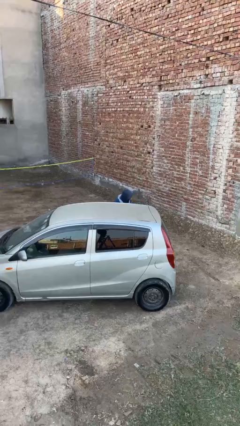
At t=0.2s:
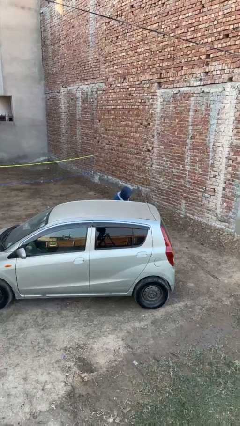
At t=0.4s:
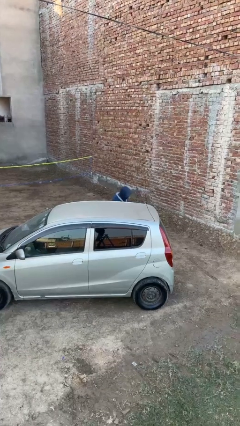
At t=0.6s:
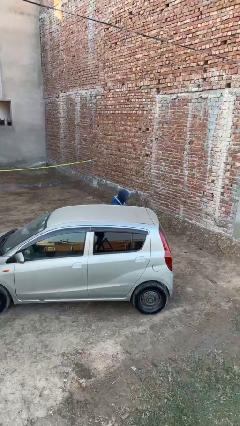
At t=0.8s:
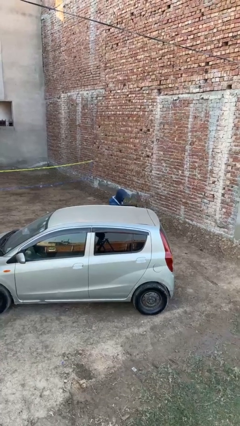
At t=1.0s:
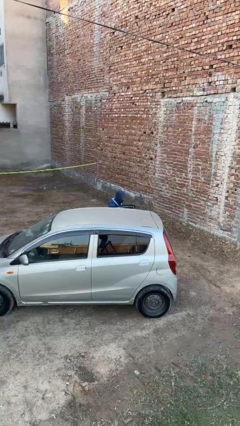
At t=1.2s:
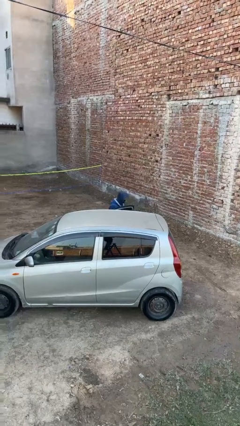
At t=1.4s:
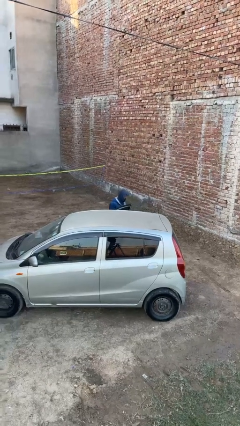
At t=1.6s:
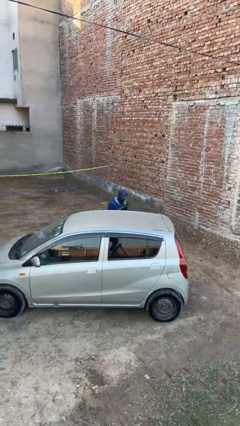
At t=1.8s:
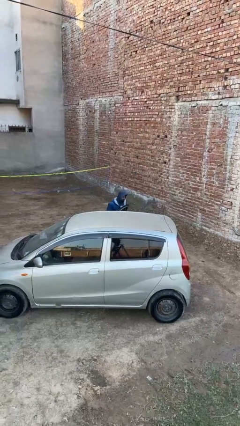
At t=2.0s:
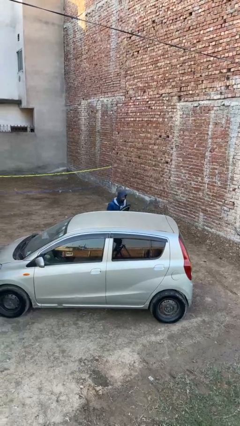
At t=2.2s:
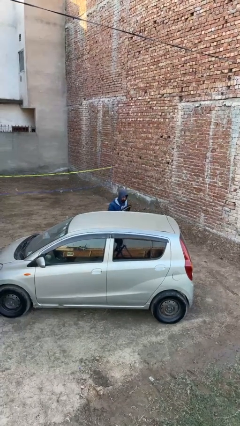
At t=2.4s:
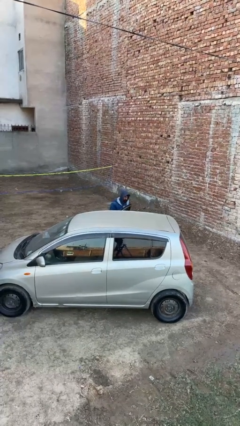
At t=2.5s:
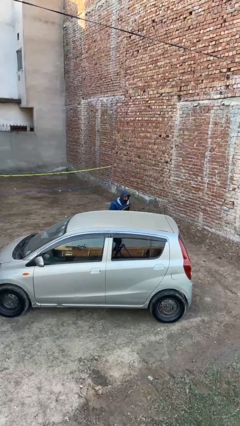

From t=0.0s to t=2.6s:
person opens car door

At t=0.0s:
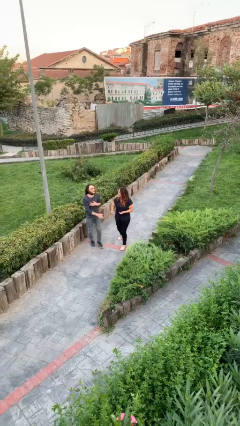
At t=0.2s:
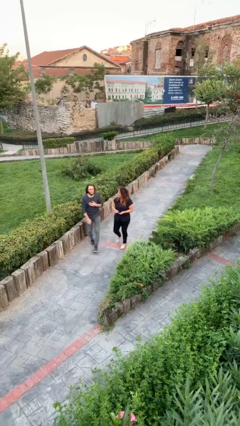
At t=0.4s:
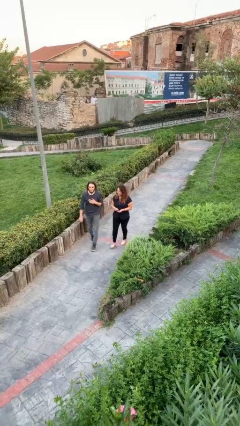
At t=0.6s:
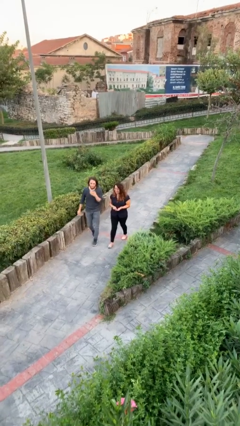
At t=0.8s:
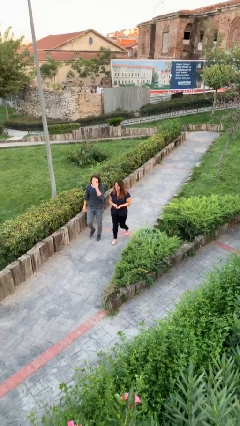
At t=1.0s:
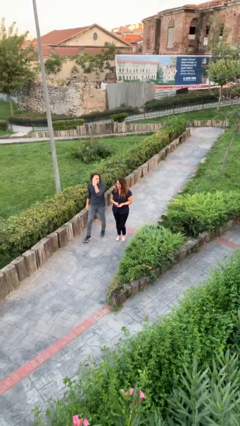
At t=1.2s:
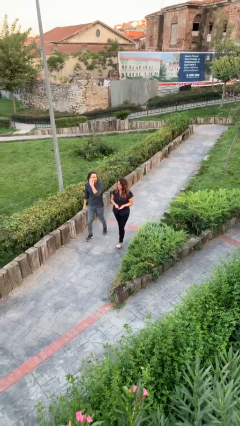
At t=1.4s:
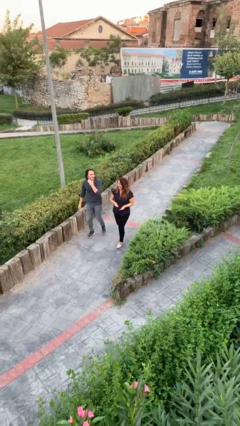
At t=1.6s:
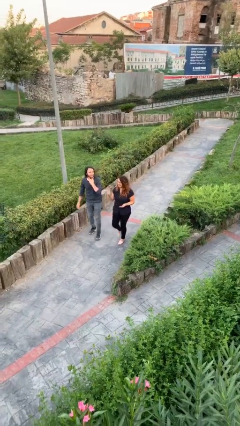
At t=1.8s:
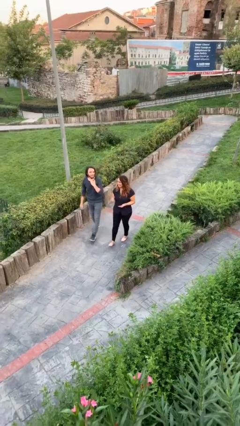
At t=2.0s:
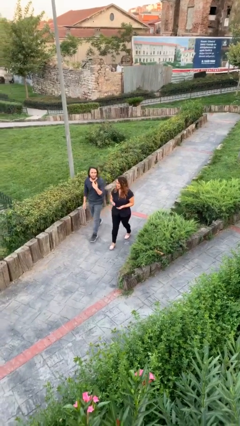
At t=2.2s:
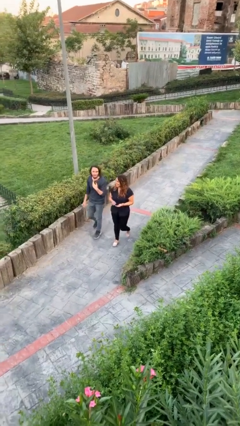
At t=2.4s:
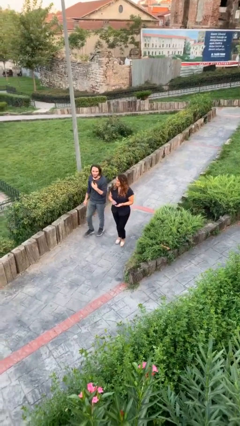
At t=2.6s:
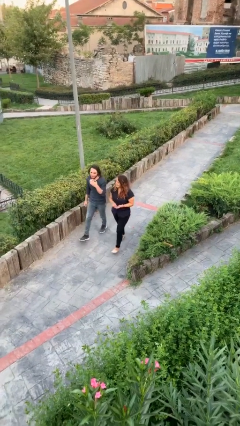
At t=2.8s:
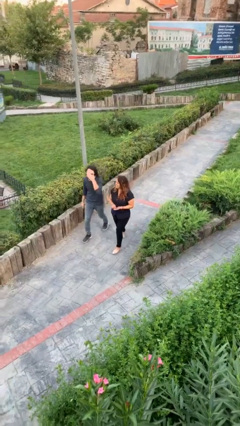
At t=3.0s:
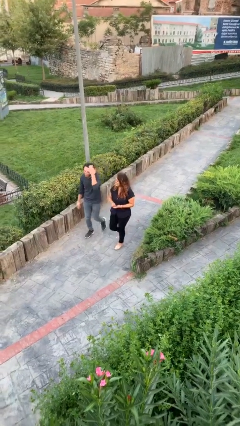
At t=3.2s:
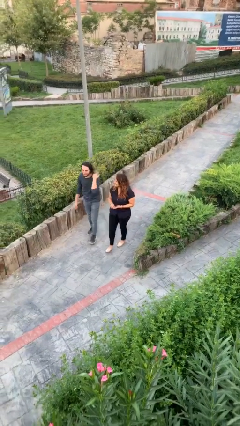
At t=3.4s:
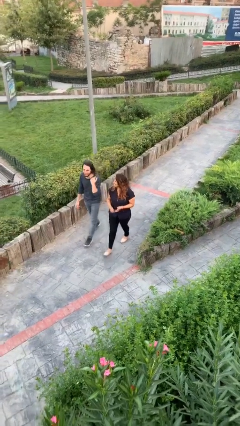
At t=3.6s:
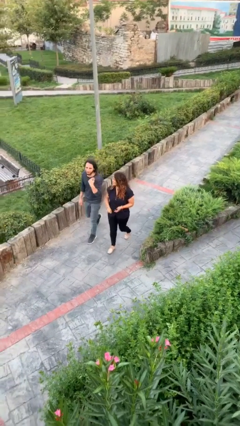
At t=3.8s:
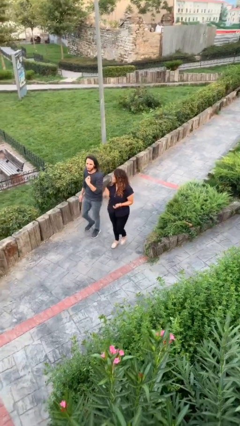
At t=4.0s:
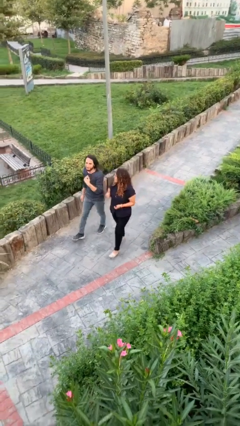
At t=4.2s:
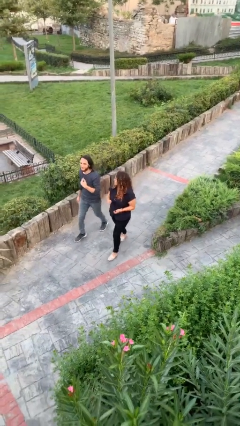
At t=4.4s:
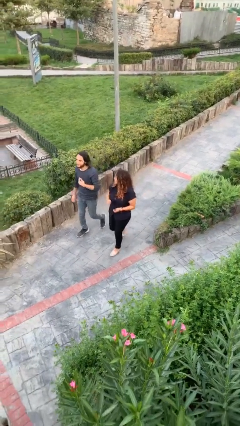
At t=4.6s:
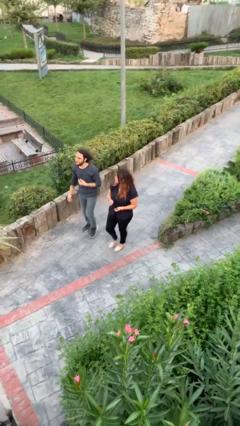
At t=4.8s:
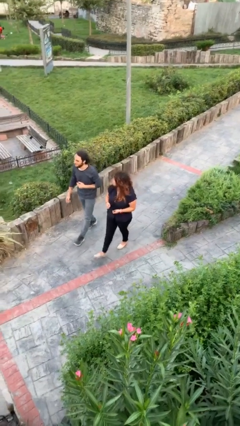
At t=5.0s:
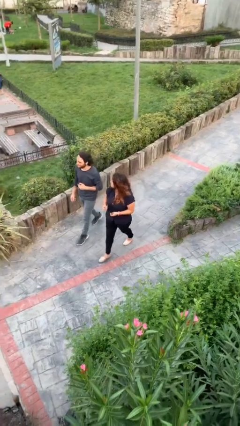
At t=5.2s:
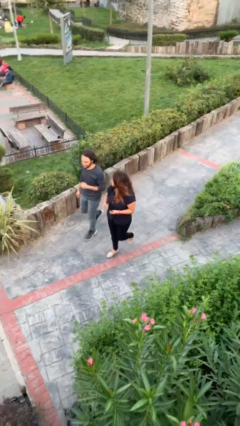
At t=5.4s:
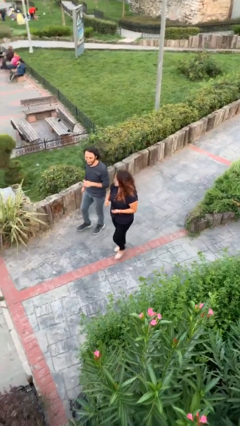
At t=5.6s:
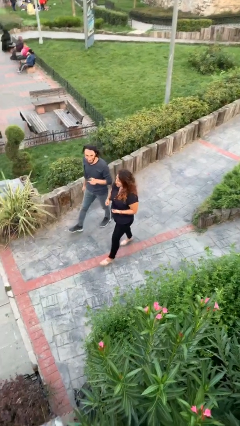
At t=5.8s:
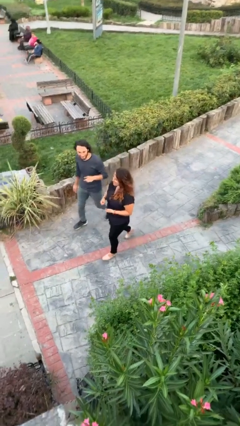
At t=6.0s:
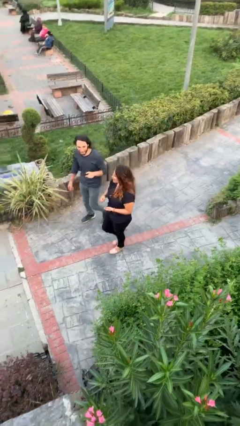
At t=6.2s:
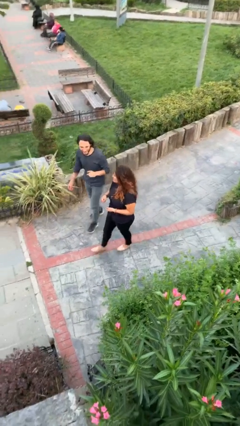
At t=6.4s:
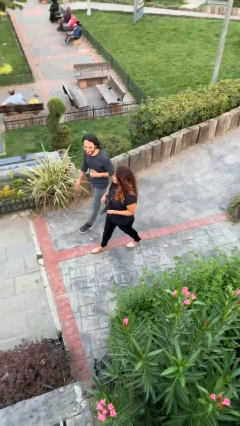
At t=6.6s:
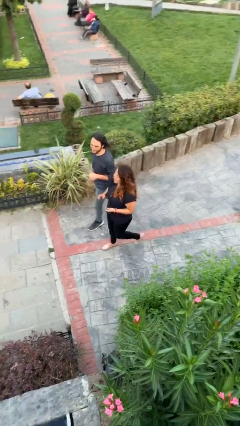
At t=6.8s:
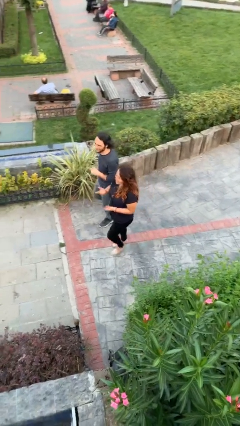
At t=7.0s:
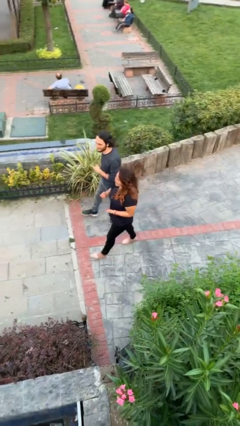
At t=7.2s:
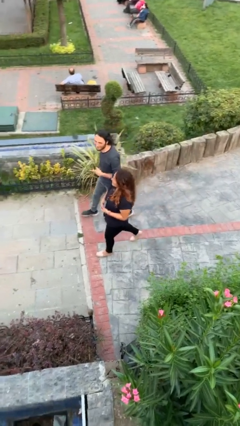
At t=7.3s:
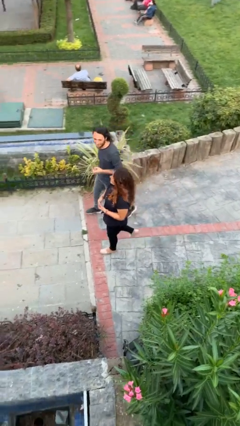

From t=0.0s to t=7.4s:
person talks to person

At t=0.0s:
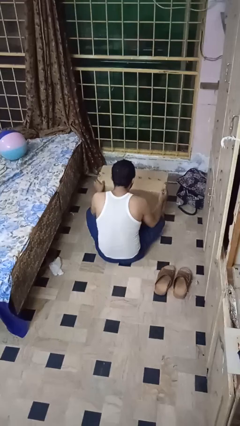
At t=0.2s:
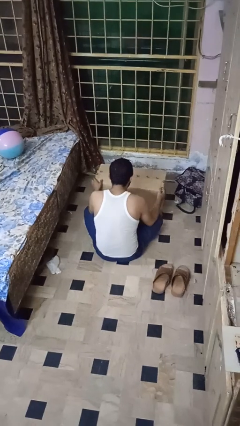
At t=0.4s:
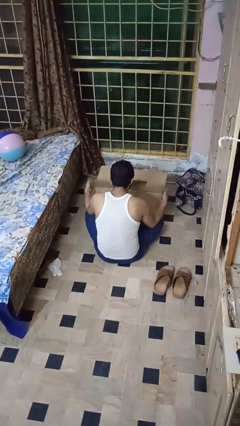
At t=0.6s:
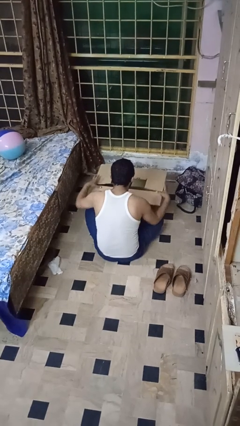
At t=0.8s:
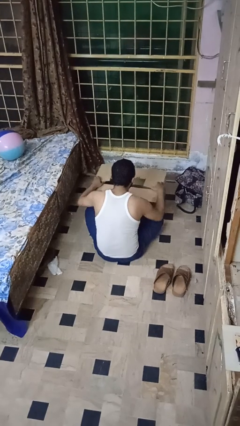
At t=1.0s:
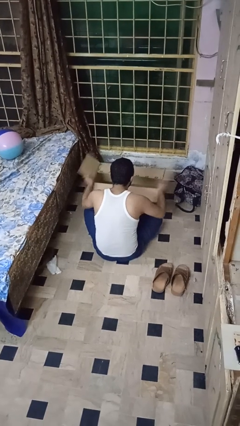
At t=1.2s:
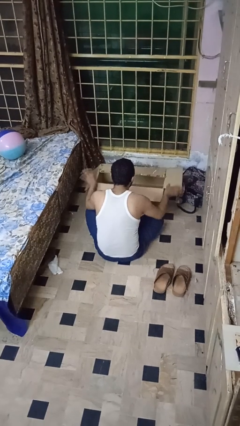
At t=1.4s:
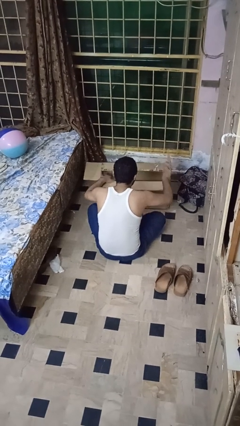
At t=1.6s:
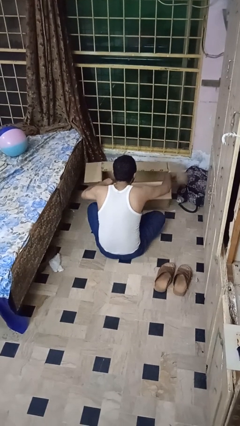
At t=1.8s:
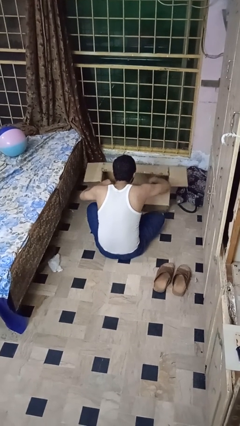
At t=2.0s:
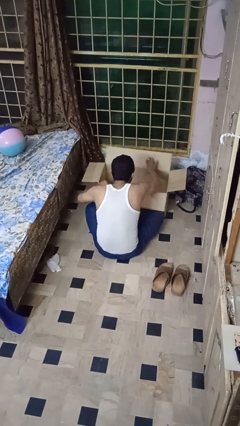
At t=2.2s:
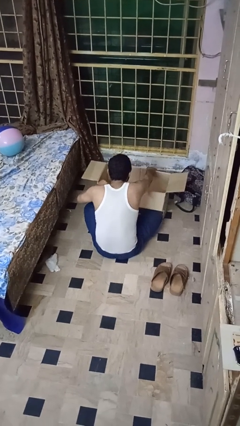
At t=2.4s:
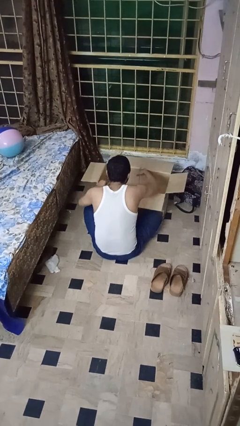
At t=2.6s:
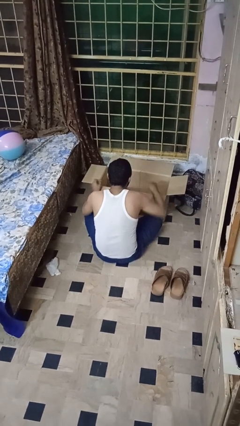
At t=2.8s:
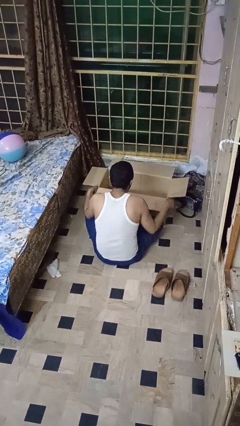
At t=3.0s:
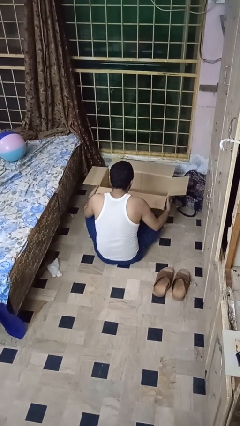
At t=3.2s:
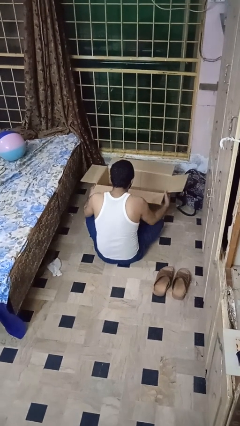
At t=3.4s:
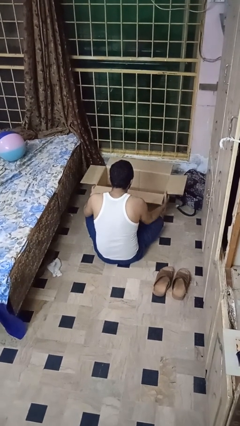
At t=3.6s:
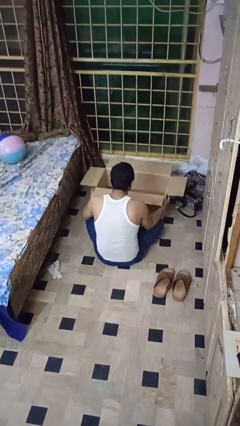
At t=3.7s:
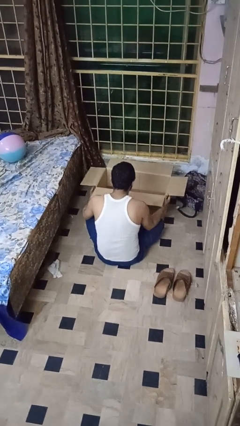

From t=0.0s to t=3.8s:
person opens box

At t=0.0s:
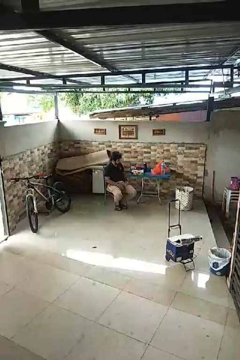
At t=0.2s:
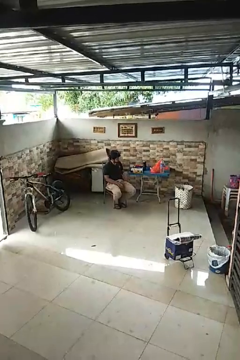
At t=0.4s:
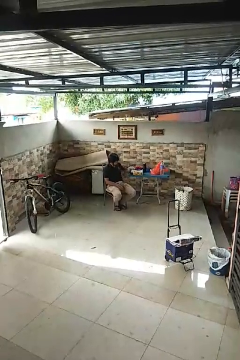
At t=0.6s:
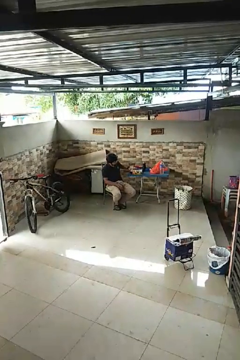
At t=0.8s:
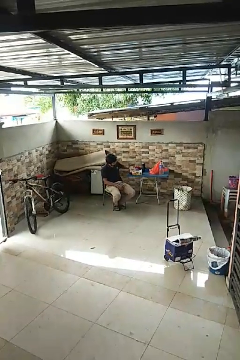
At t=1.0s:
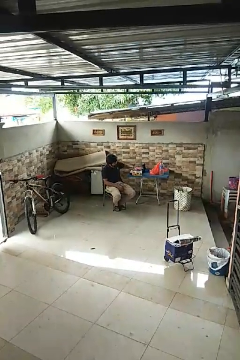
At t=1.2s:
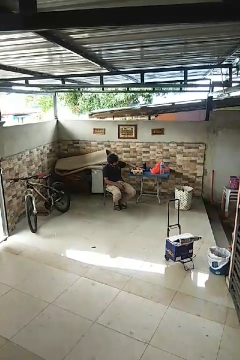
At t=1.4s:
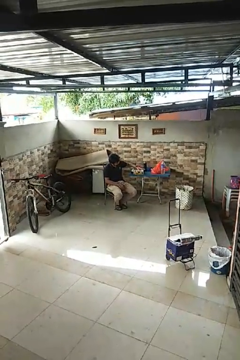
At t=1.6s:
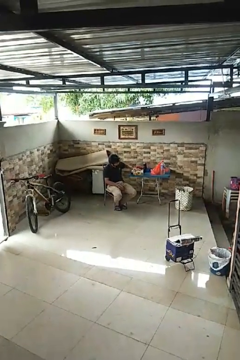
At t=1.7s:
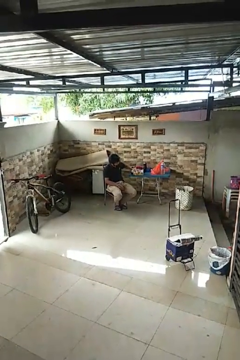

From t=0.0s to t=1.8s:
person taps object with finger

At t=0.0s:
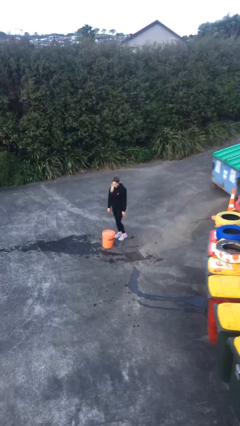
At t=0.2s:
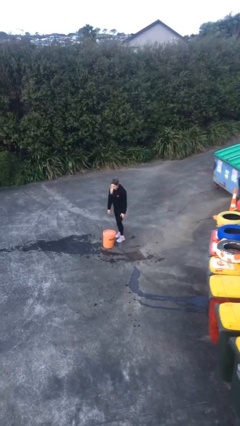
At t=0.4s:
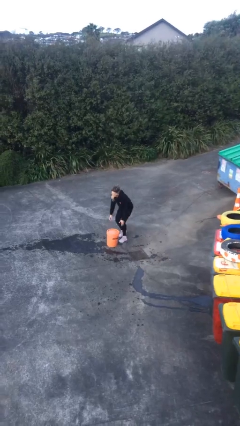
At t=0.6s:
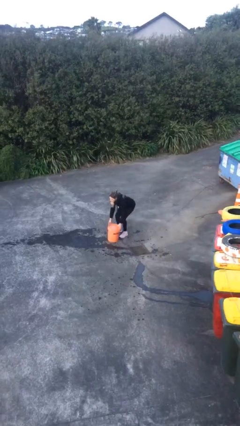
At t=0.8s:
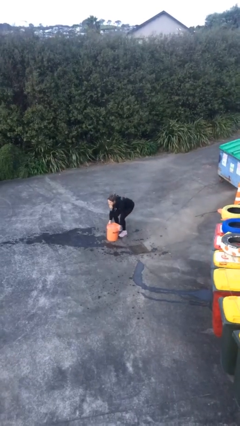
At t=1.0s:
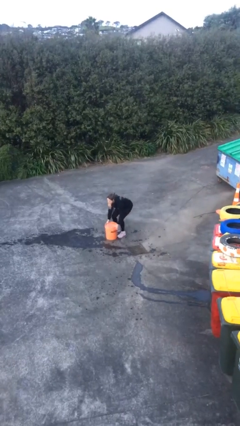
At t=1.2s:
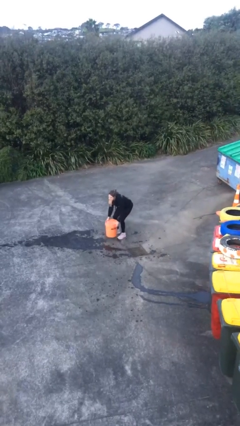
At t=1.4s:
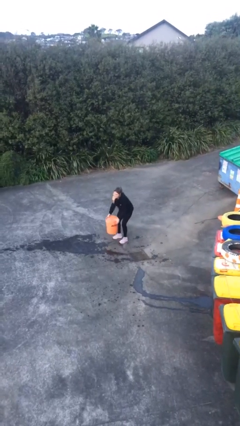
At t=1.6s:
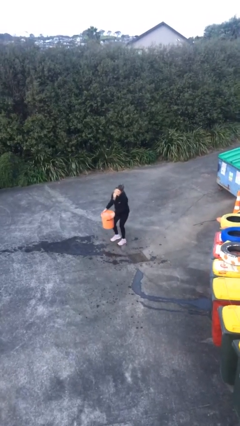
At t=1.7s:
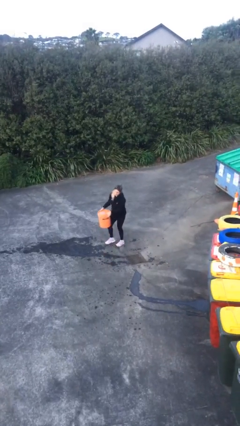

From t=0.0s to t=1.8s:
person picks up object from floor

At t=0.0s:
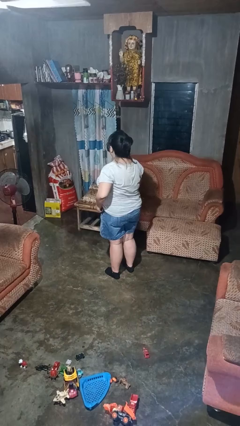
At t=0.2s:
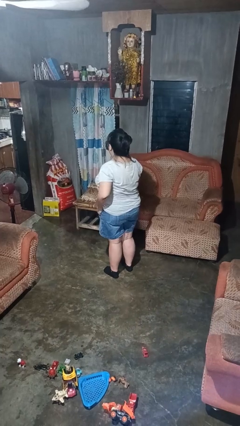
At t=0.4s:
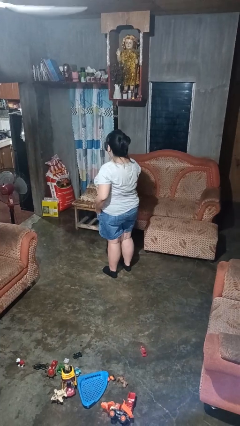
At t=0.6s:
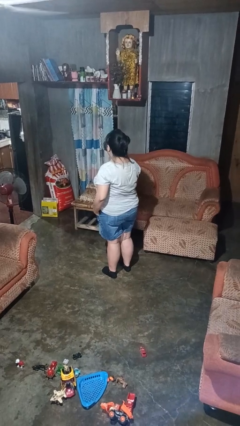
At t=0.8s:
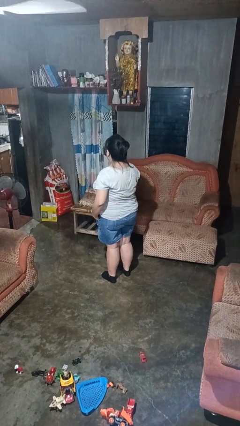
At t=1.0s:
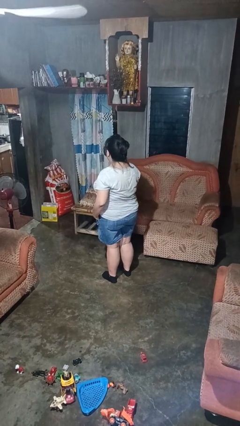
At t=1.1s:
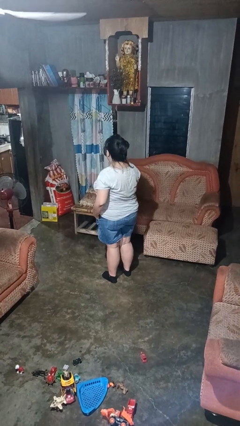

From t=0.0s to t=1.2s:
person puts hands in back pockets
